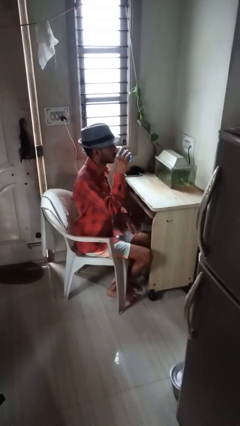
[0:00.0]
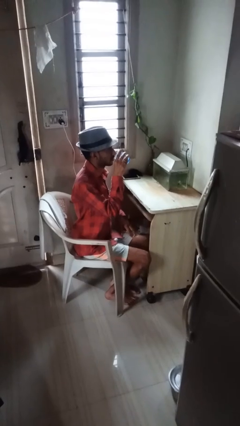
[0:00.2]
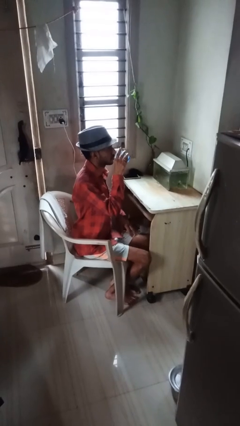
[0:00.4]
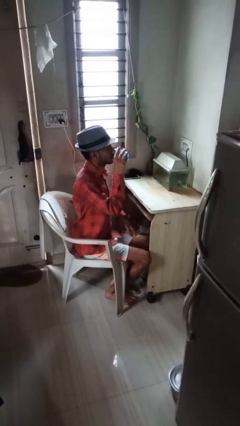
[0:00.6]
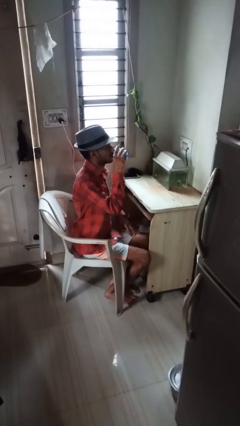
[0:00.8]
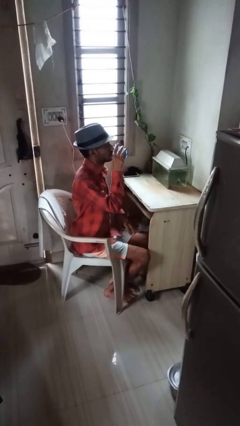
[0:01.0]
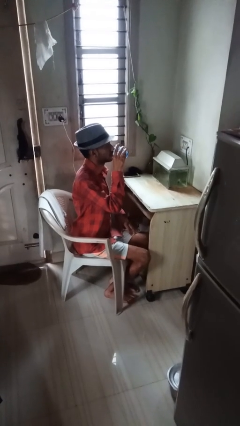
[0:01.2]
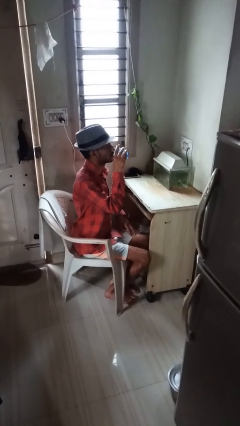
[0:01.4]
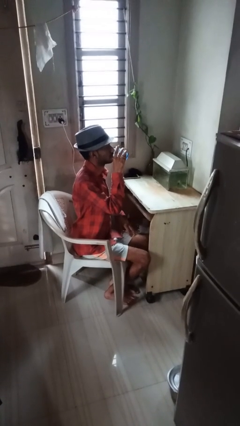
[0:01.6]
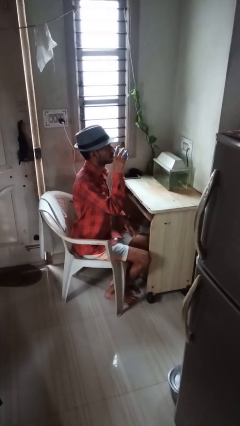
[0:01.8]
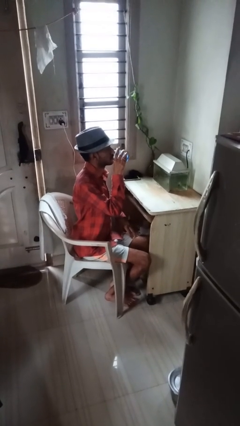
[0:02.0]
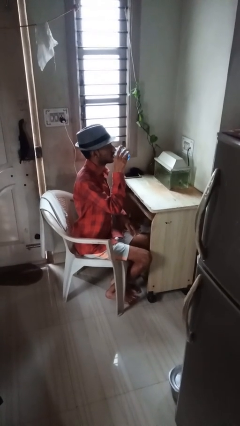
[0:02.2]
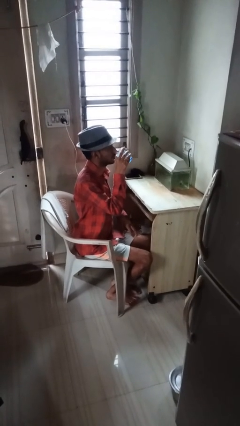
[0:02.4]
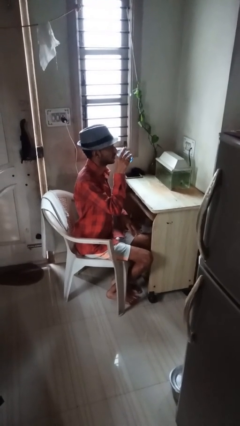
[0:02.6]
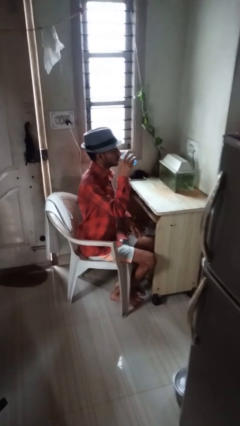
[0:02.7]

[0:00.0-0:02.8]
person drinks from shotglass

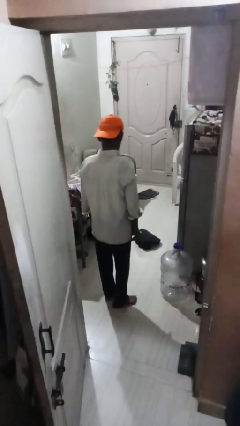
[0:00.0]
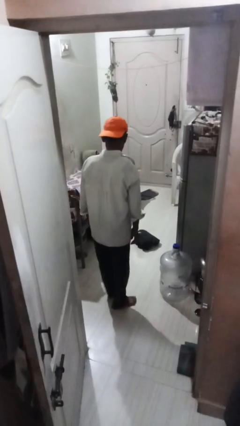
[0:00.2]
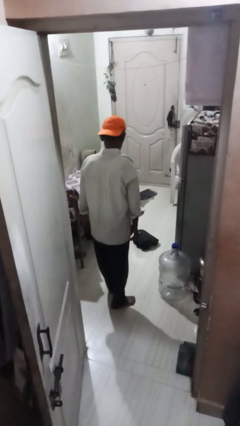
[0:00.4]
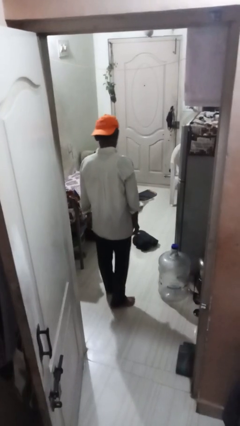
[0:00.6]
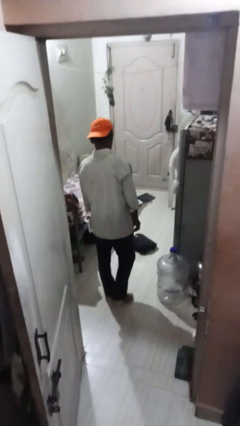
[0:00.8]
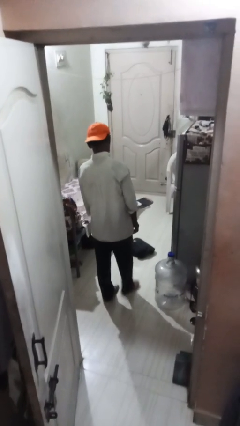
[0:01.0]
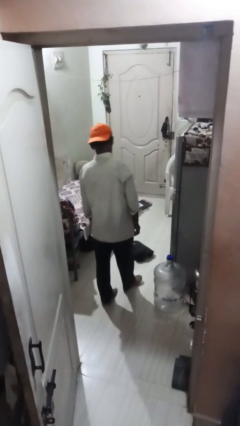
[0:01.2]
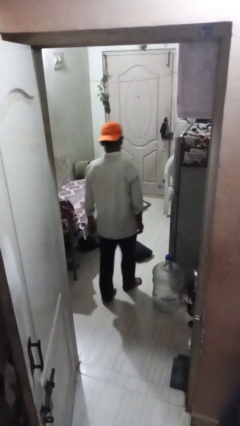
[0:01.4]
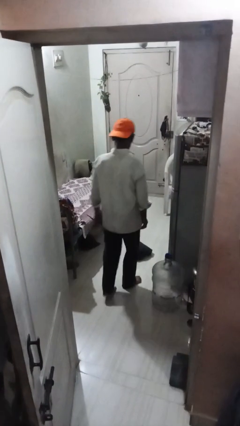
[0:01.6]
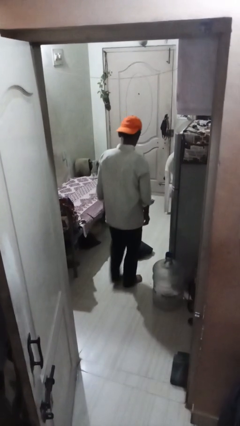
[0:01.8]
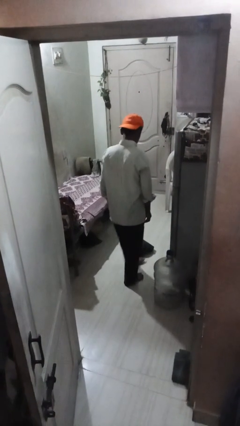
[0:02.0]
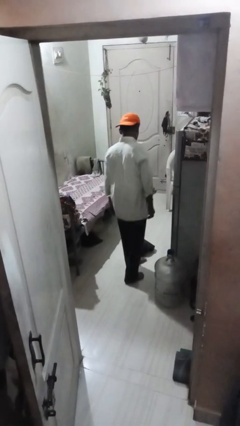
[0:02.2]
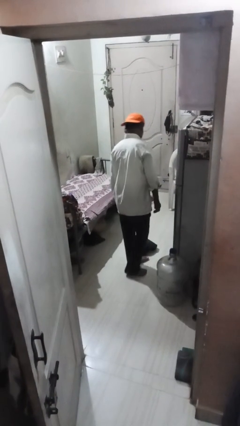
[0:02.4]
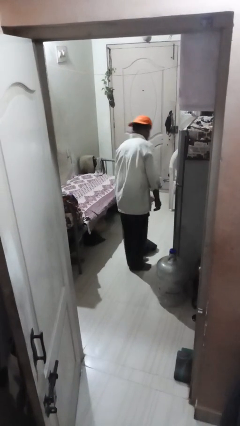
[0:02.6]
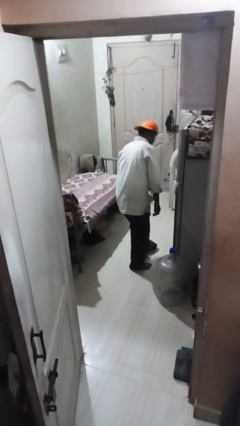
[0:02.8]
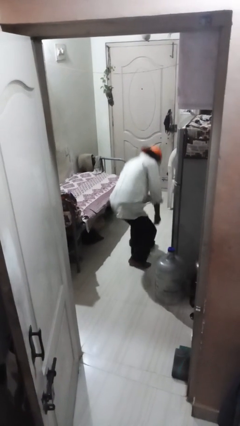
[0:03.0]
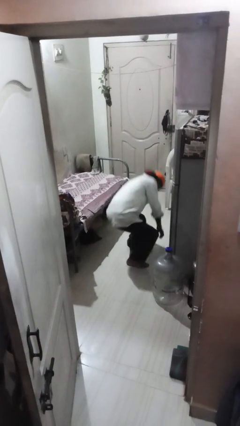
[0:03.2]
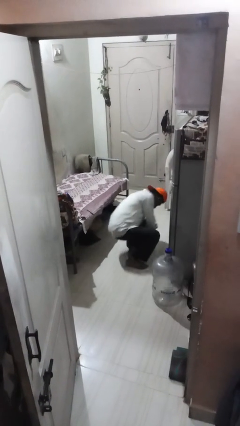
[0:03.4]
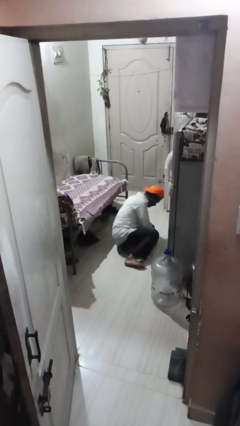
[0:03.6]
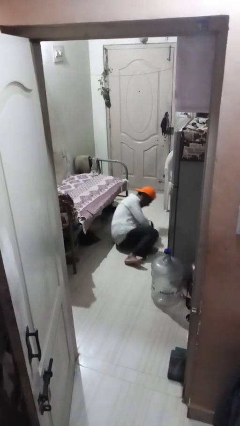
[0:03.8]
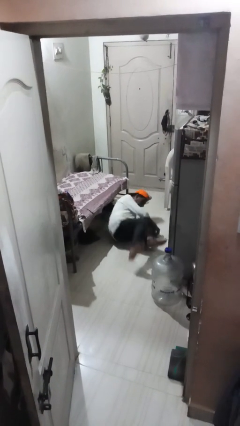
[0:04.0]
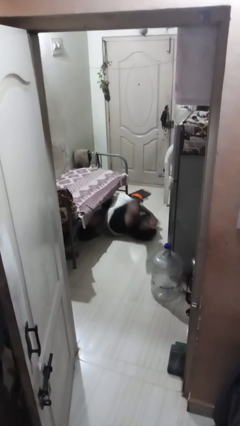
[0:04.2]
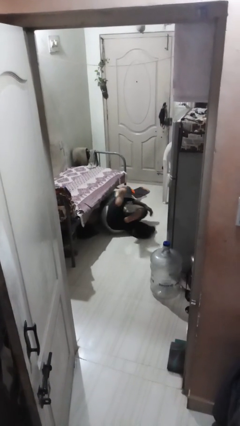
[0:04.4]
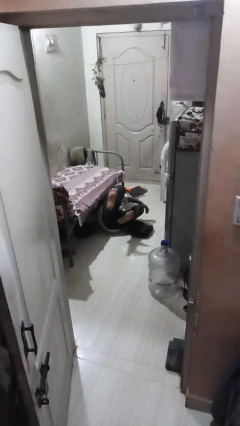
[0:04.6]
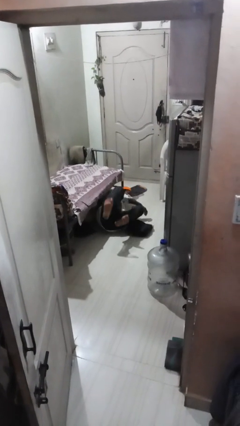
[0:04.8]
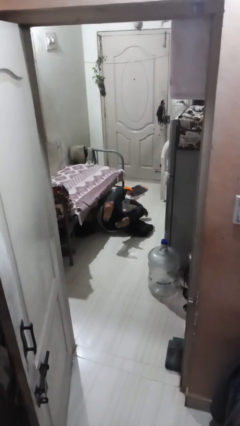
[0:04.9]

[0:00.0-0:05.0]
person trips on object on floor

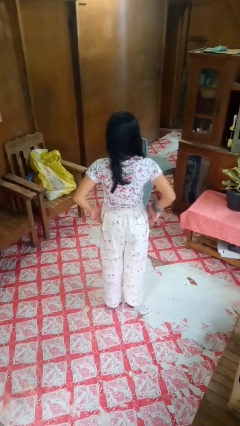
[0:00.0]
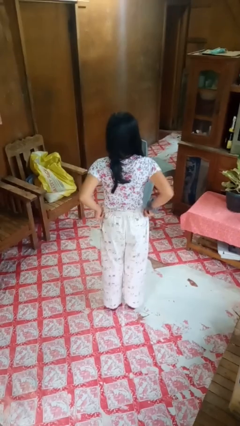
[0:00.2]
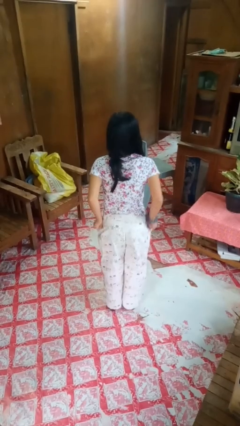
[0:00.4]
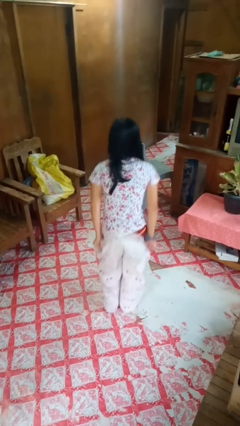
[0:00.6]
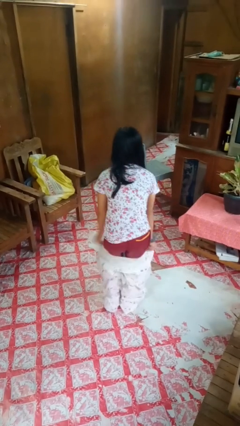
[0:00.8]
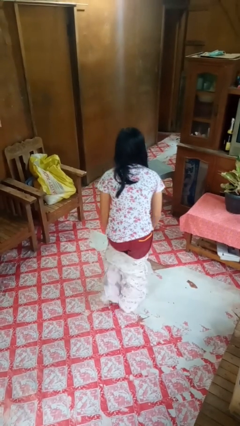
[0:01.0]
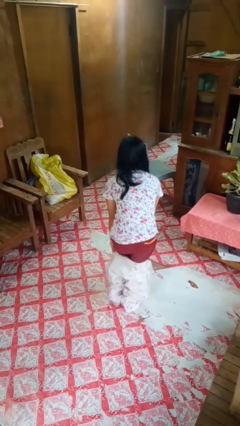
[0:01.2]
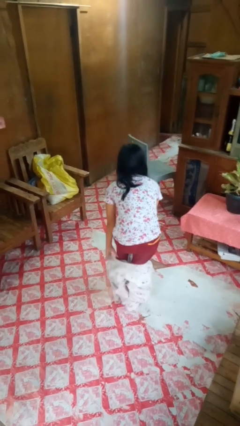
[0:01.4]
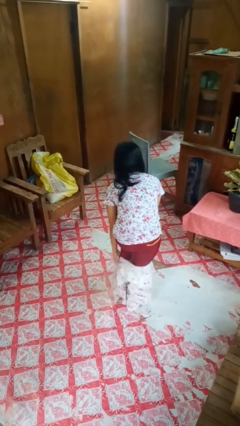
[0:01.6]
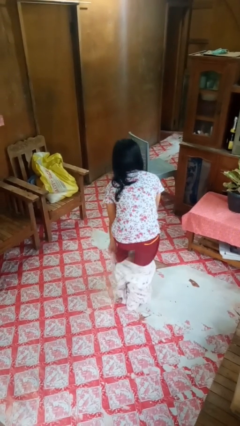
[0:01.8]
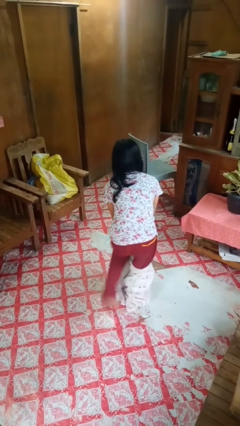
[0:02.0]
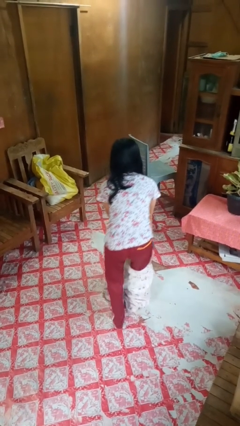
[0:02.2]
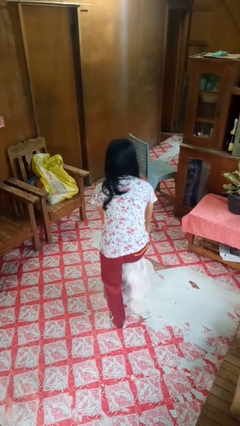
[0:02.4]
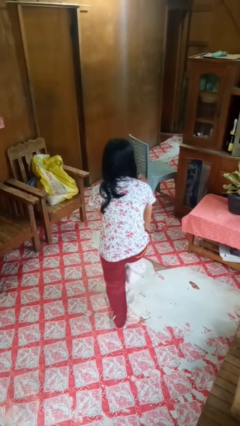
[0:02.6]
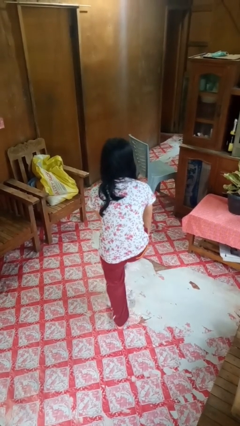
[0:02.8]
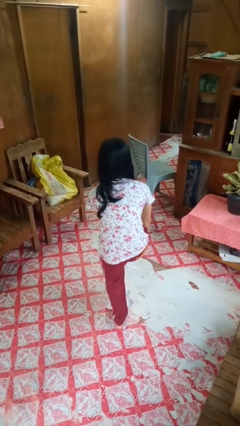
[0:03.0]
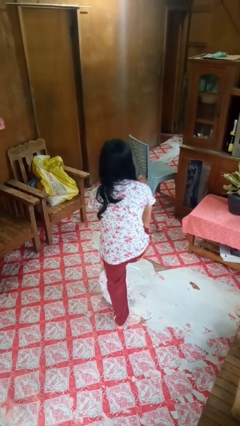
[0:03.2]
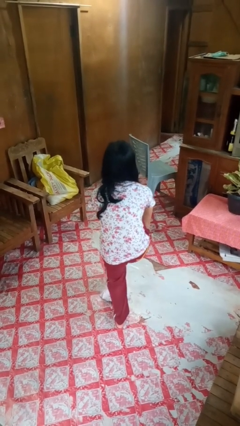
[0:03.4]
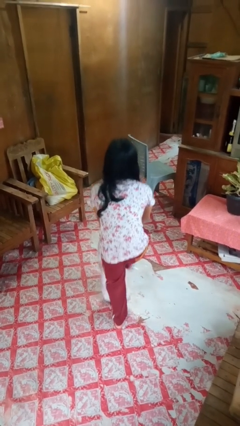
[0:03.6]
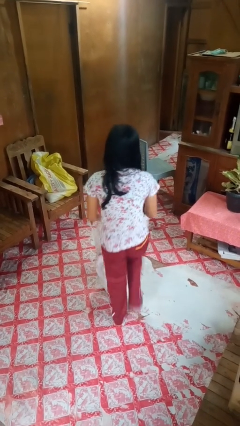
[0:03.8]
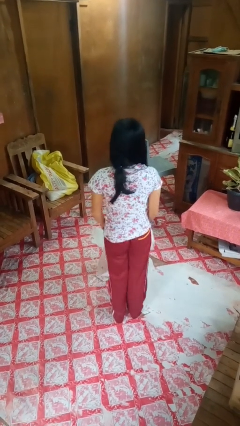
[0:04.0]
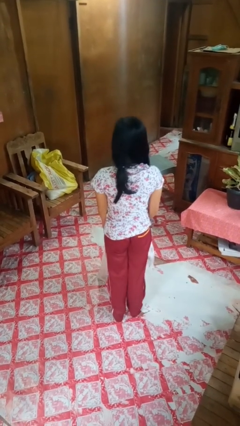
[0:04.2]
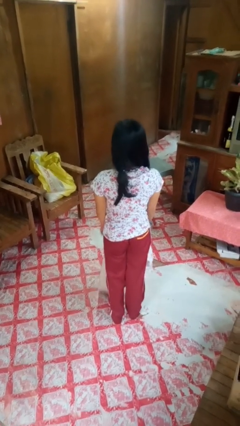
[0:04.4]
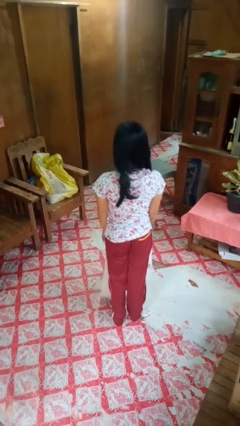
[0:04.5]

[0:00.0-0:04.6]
person takes off pants

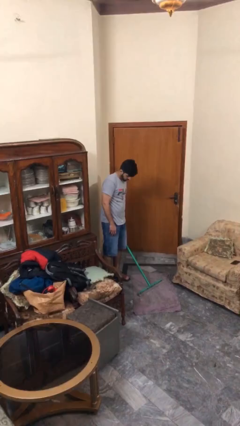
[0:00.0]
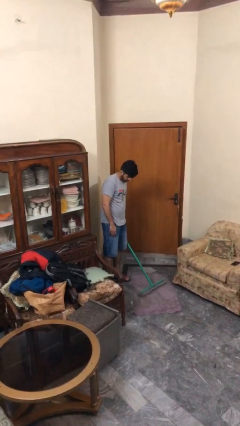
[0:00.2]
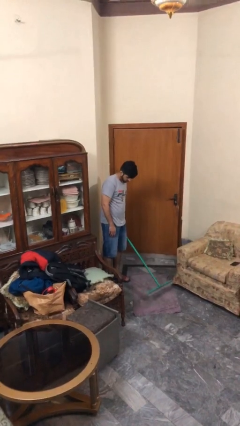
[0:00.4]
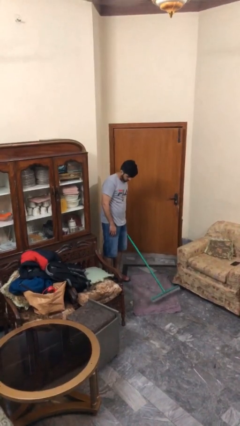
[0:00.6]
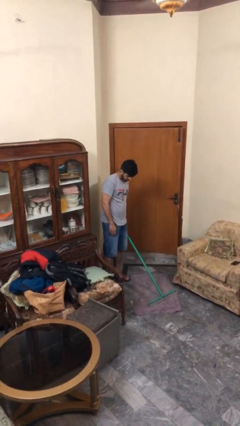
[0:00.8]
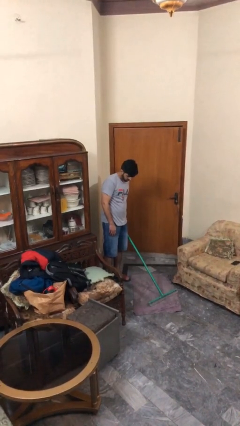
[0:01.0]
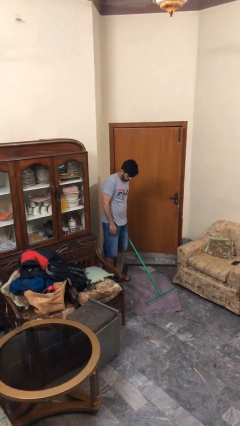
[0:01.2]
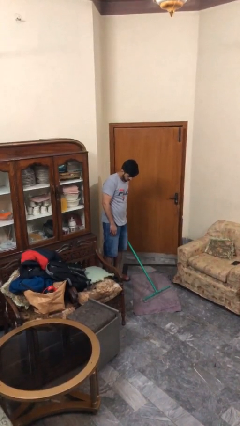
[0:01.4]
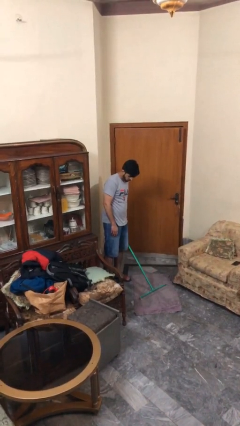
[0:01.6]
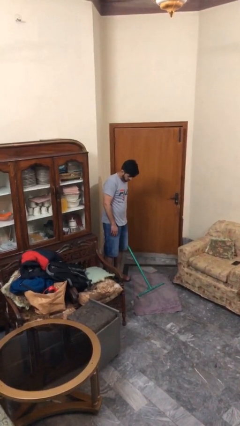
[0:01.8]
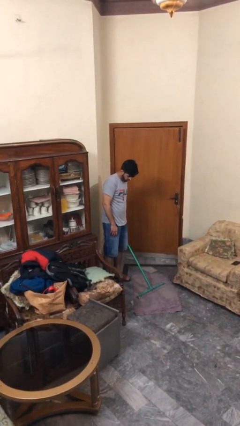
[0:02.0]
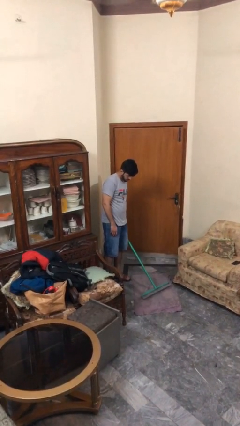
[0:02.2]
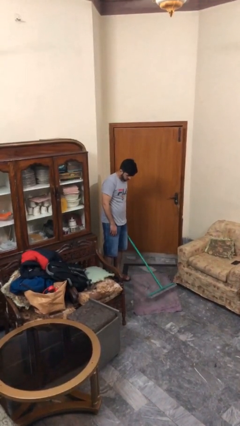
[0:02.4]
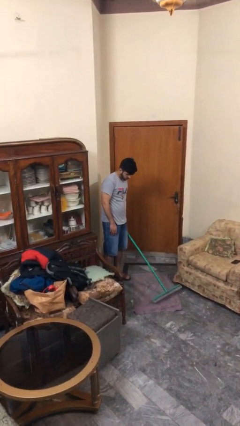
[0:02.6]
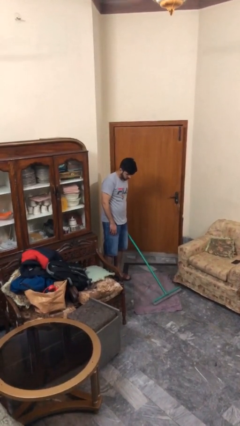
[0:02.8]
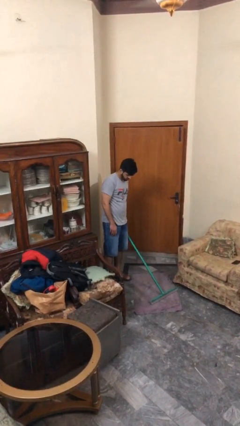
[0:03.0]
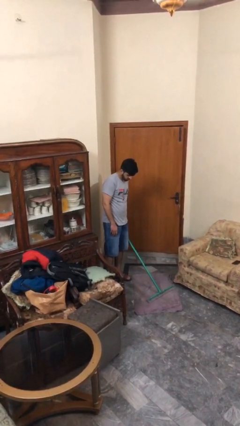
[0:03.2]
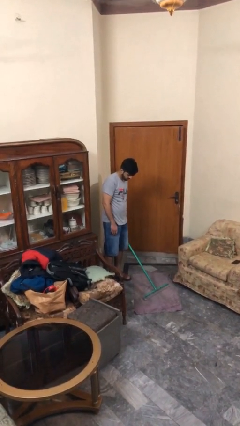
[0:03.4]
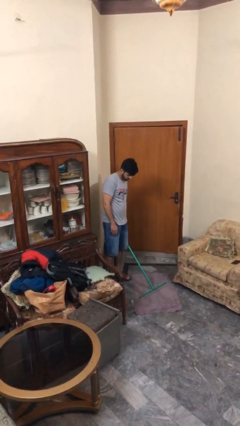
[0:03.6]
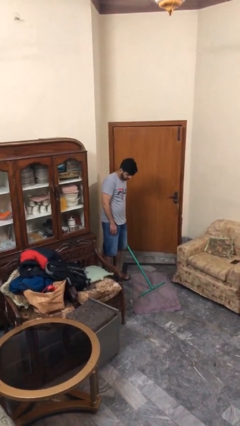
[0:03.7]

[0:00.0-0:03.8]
person vacuums carpet

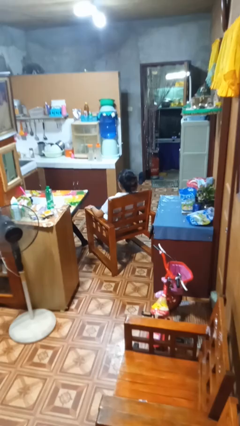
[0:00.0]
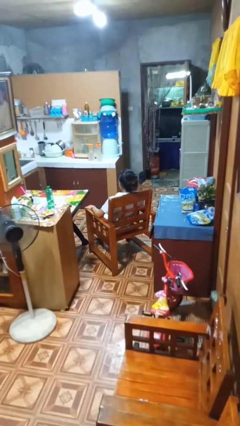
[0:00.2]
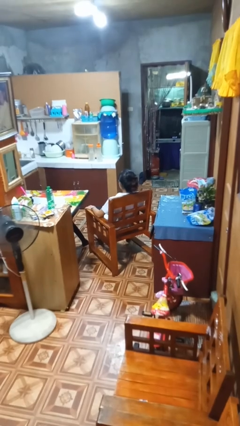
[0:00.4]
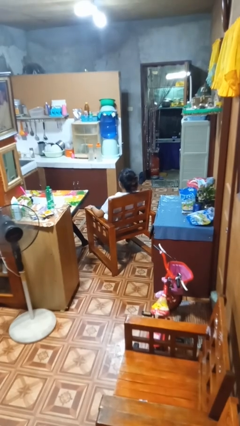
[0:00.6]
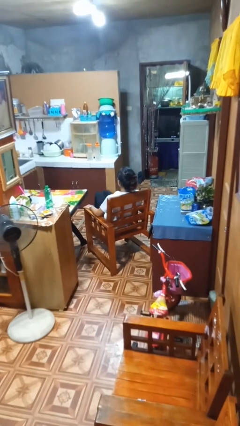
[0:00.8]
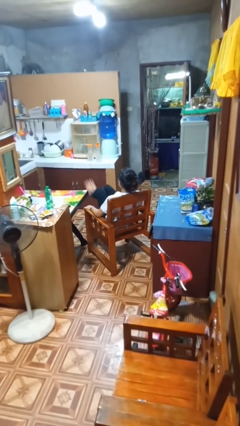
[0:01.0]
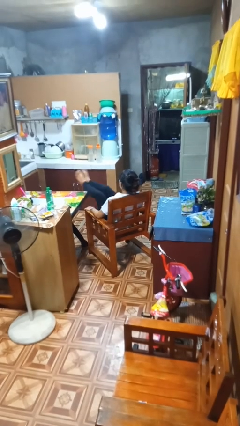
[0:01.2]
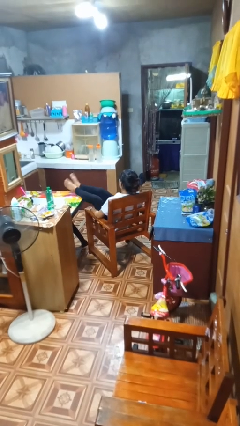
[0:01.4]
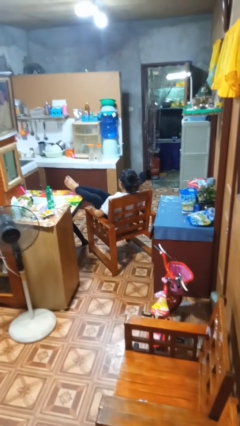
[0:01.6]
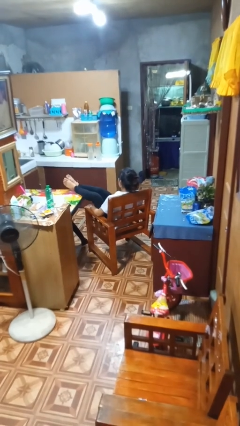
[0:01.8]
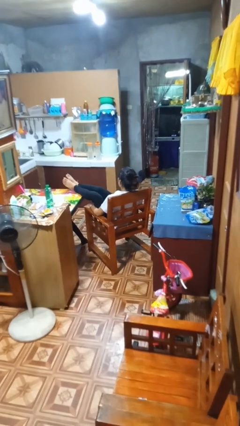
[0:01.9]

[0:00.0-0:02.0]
person puts feet up
